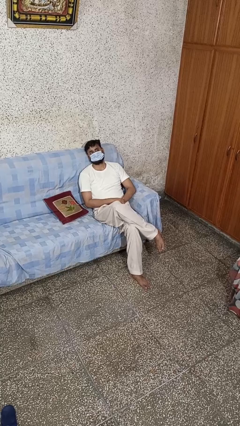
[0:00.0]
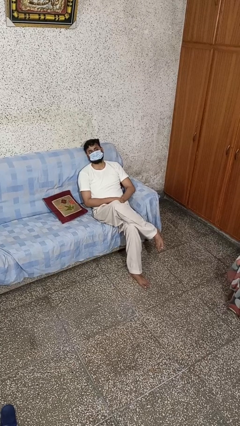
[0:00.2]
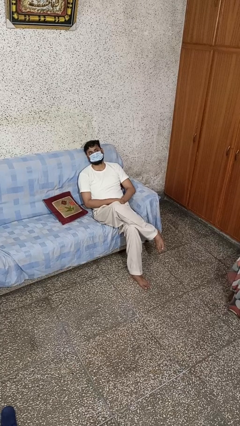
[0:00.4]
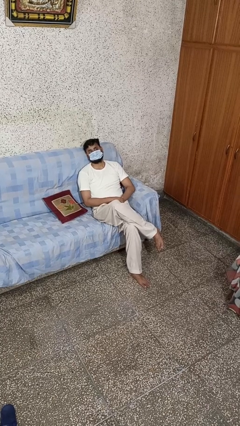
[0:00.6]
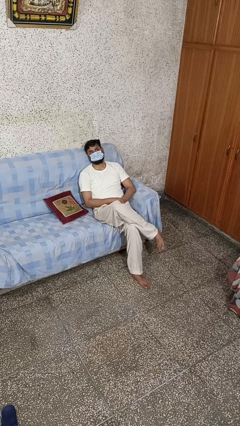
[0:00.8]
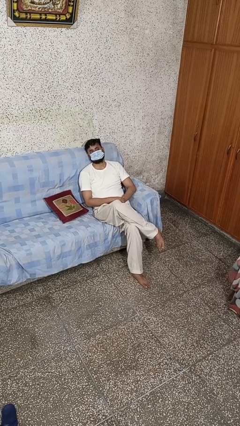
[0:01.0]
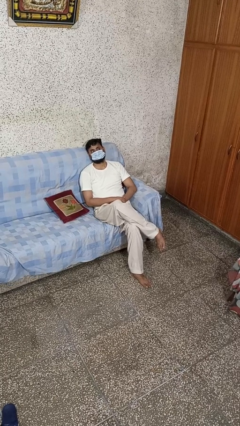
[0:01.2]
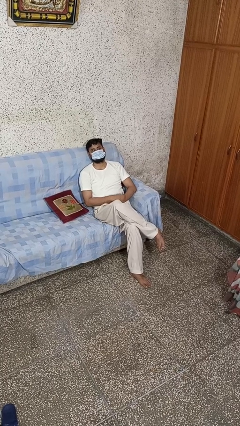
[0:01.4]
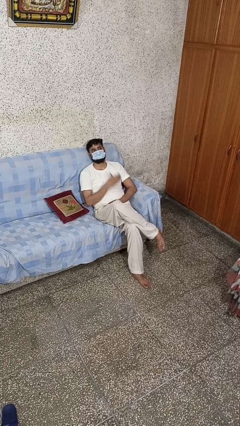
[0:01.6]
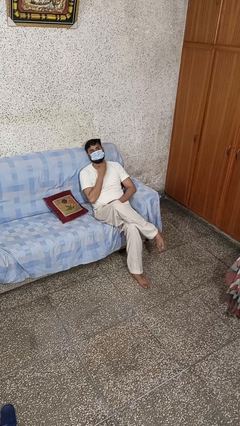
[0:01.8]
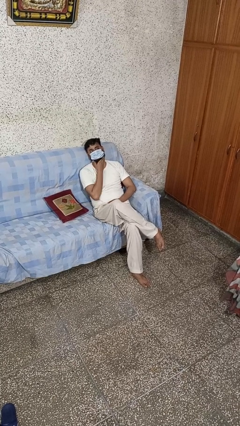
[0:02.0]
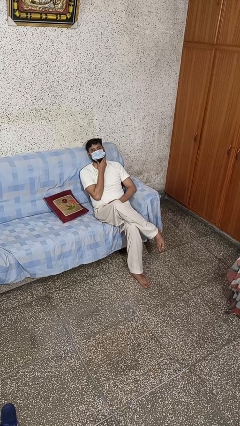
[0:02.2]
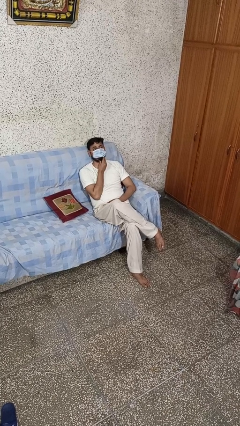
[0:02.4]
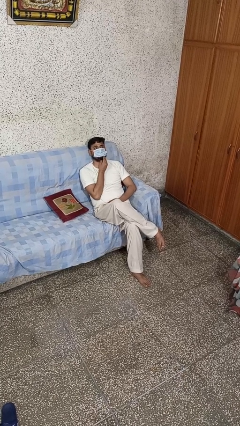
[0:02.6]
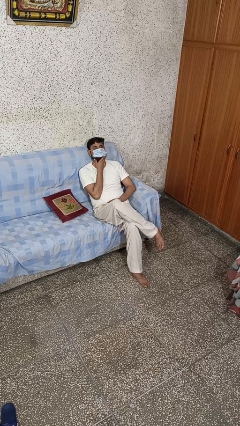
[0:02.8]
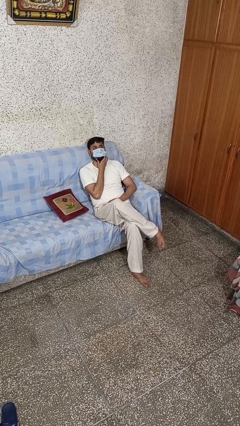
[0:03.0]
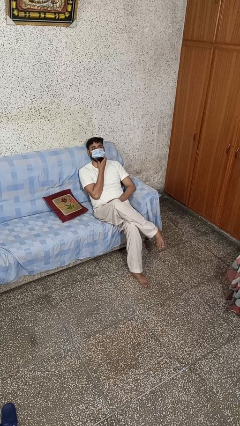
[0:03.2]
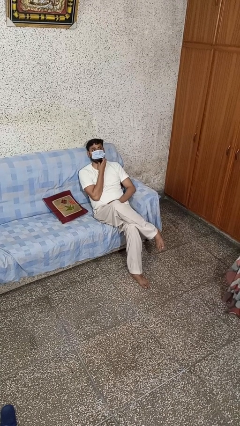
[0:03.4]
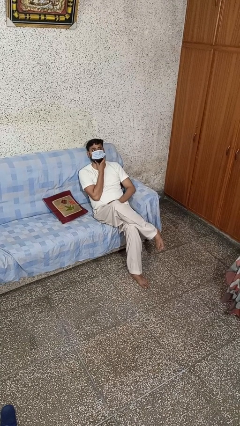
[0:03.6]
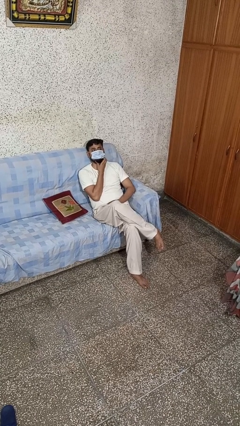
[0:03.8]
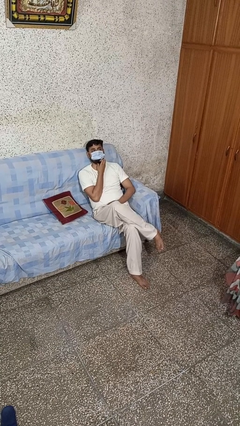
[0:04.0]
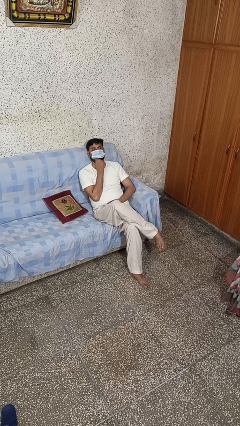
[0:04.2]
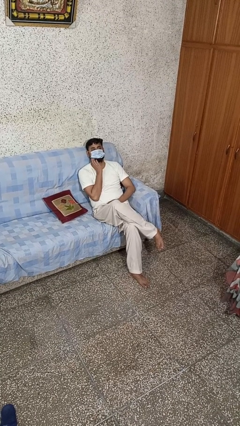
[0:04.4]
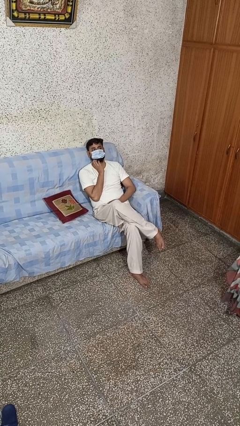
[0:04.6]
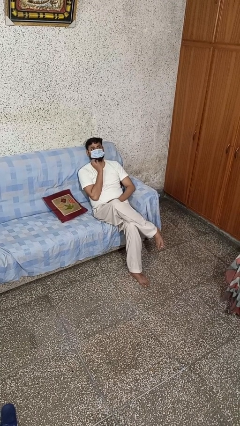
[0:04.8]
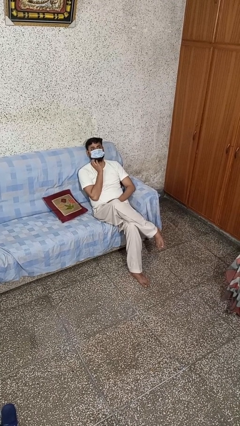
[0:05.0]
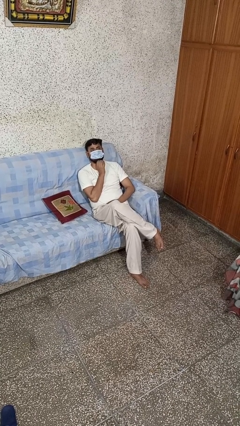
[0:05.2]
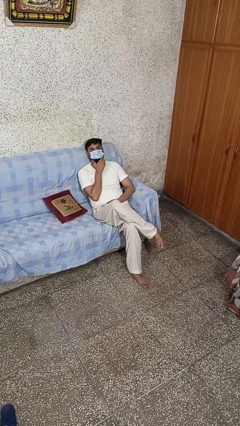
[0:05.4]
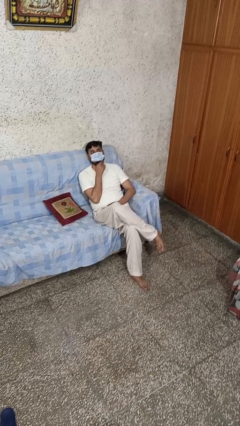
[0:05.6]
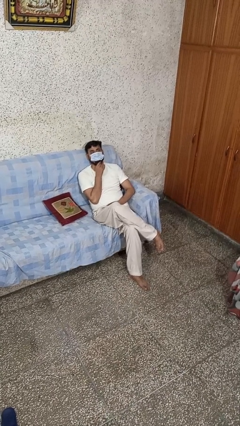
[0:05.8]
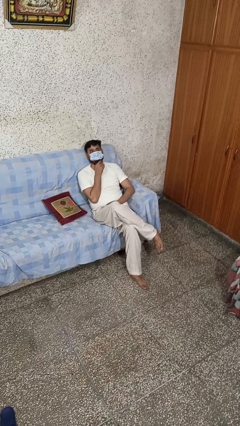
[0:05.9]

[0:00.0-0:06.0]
person strokes chin

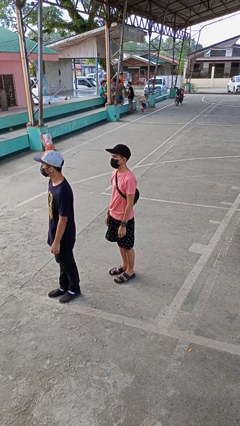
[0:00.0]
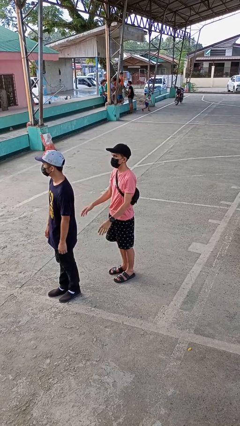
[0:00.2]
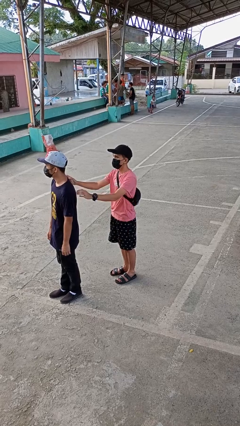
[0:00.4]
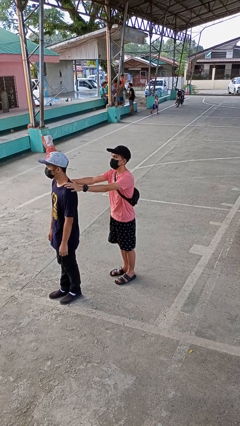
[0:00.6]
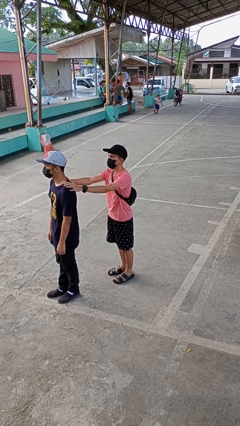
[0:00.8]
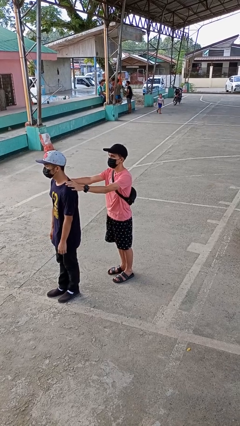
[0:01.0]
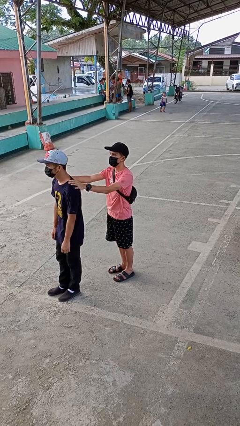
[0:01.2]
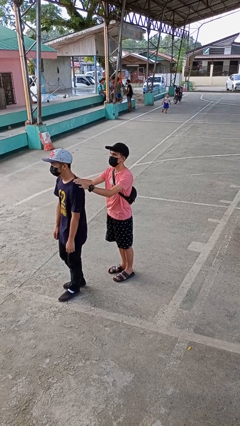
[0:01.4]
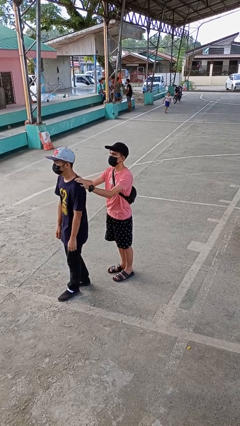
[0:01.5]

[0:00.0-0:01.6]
person grabs person by shoulder

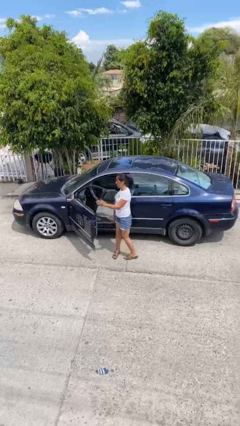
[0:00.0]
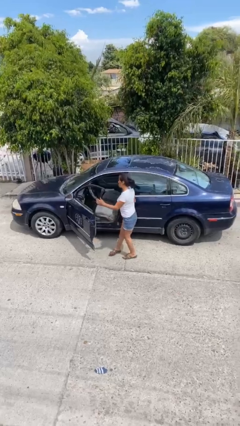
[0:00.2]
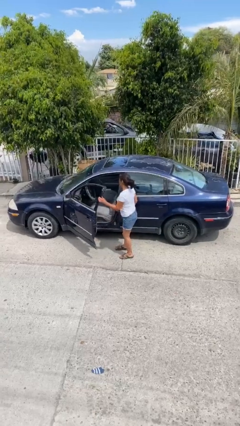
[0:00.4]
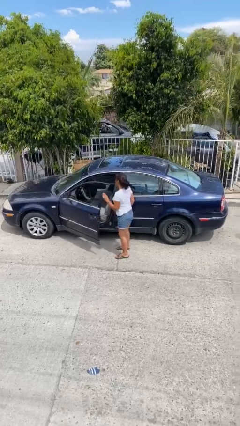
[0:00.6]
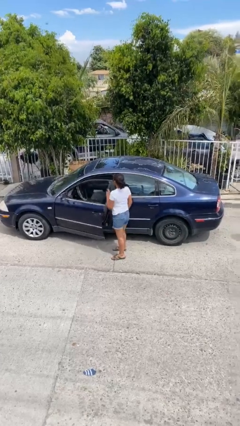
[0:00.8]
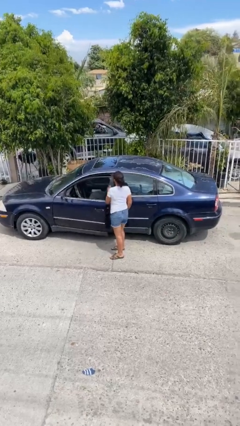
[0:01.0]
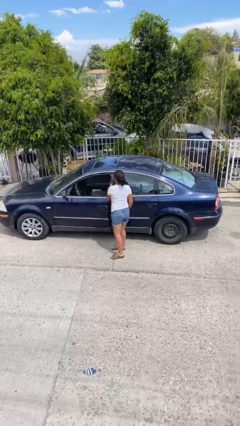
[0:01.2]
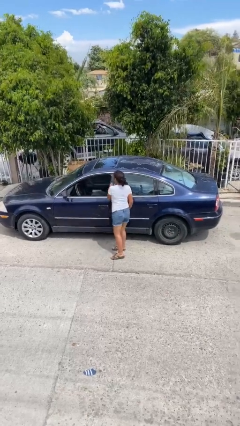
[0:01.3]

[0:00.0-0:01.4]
person closes car door

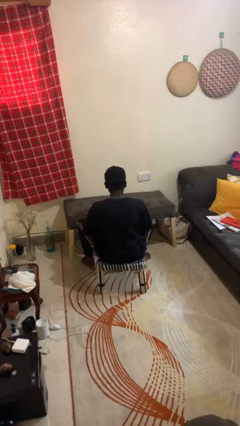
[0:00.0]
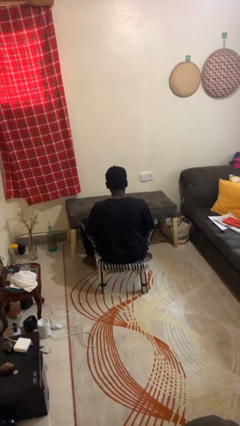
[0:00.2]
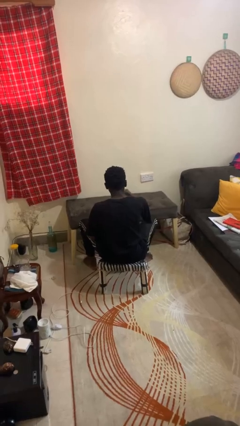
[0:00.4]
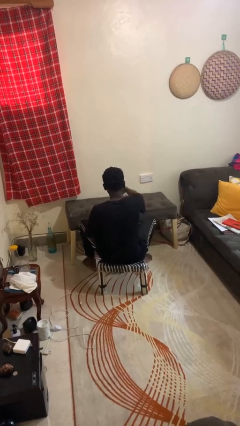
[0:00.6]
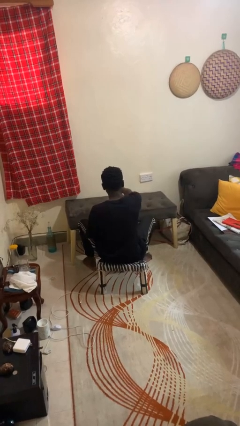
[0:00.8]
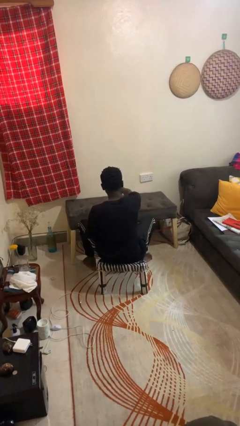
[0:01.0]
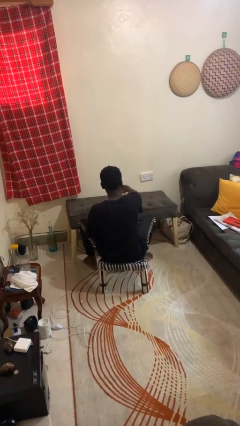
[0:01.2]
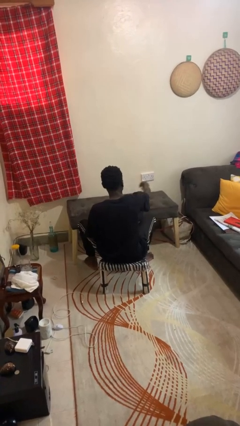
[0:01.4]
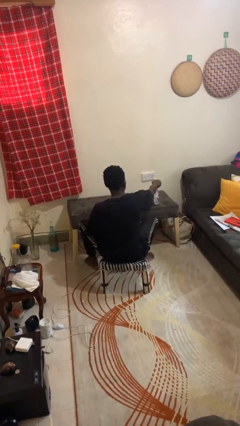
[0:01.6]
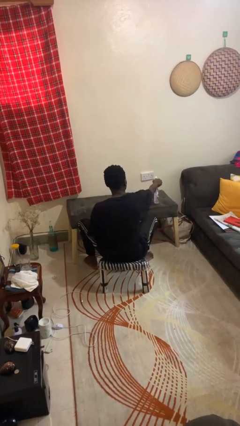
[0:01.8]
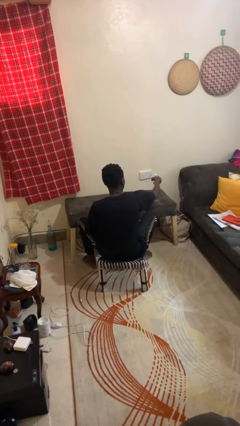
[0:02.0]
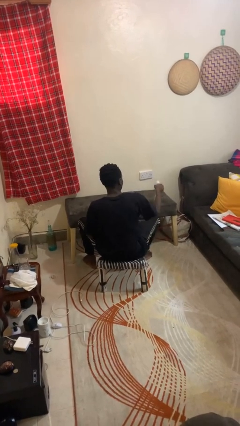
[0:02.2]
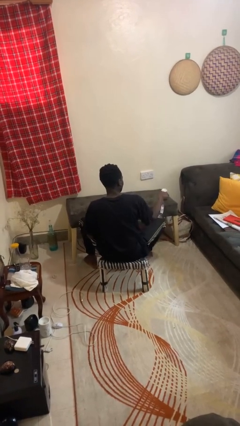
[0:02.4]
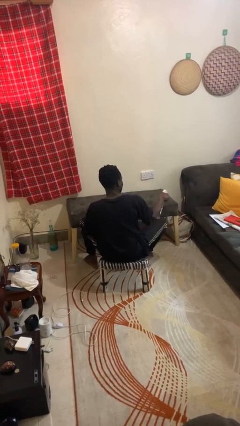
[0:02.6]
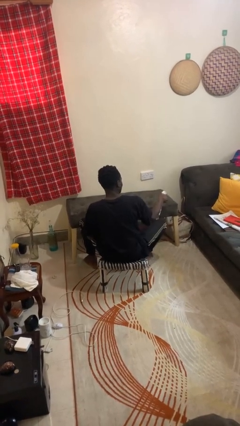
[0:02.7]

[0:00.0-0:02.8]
person sprays from bottle

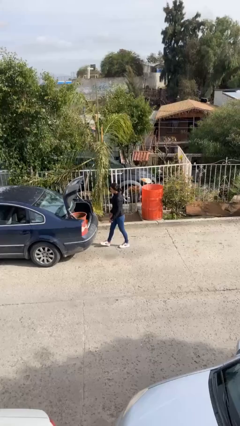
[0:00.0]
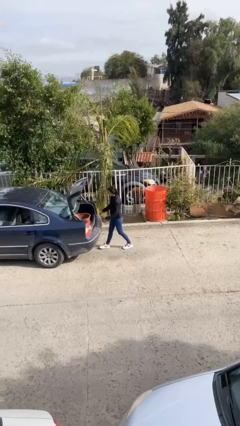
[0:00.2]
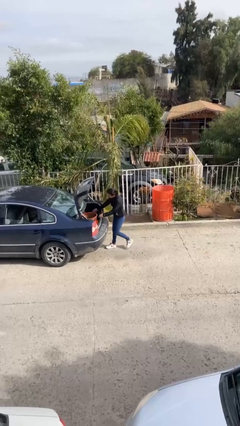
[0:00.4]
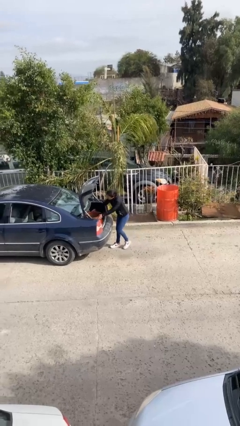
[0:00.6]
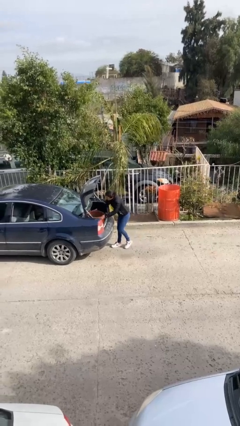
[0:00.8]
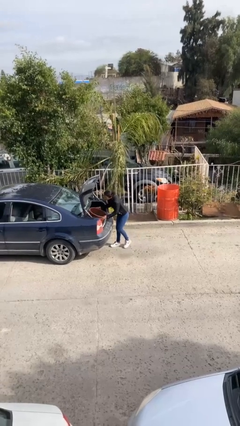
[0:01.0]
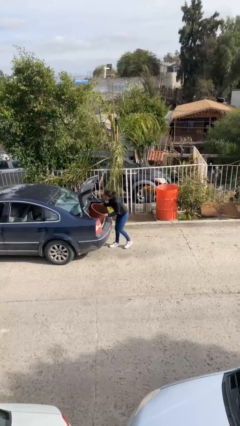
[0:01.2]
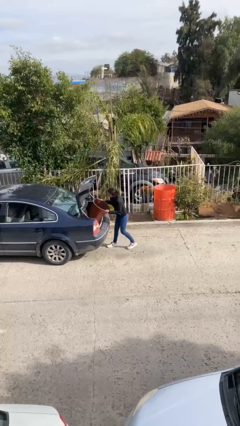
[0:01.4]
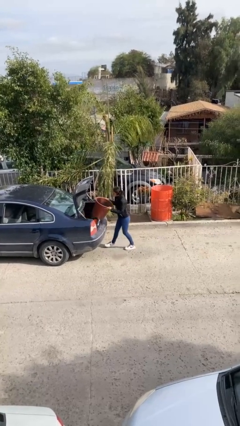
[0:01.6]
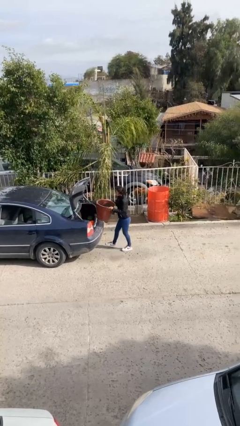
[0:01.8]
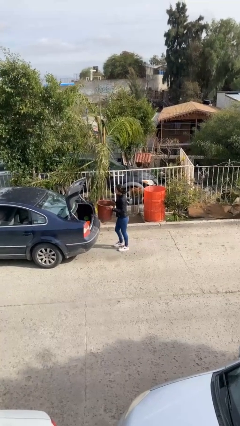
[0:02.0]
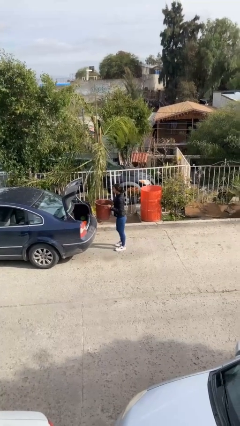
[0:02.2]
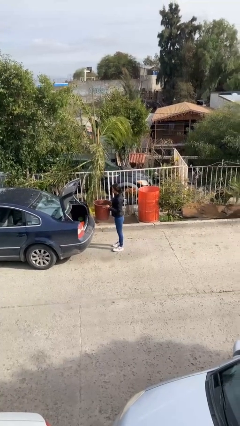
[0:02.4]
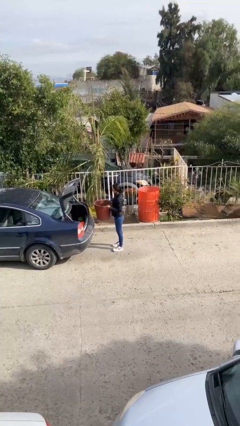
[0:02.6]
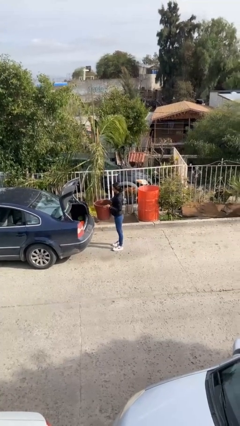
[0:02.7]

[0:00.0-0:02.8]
person unloads car

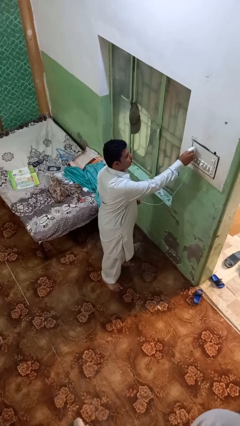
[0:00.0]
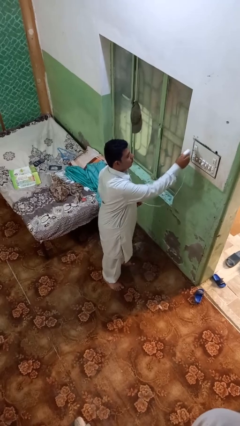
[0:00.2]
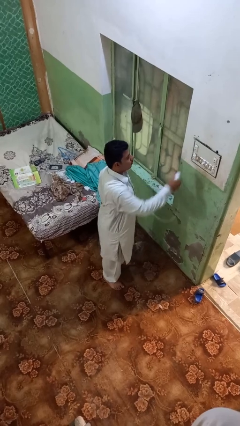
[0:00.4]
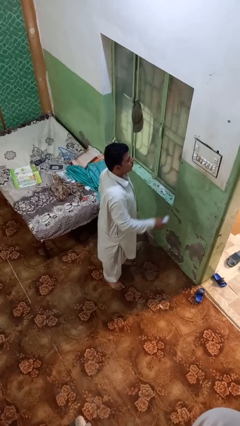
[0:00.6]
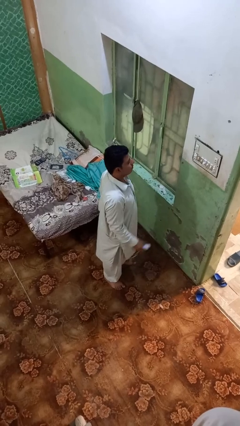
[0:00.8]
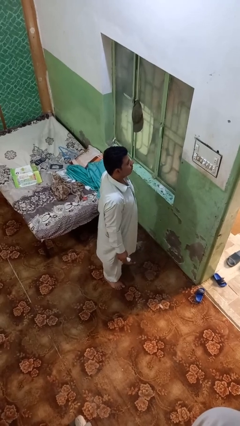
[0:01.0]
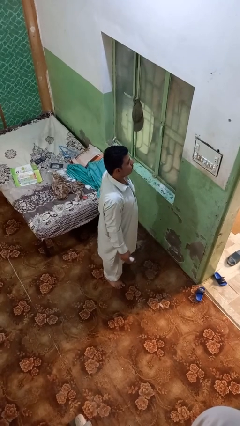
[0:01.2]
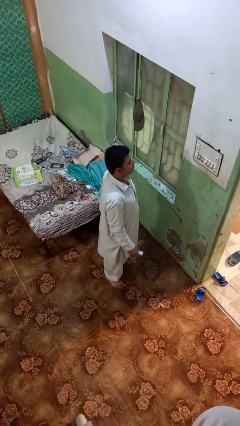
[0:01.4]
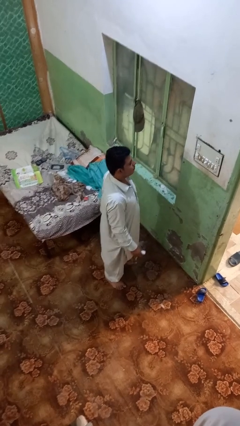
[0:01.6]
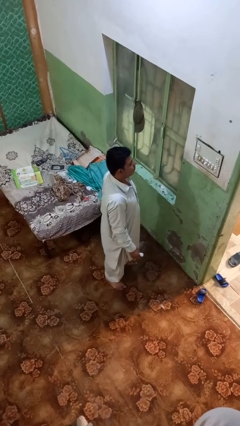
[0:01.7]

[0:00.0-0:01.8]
person unplugs from electrical socket

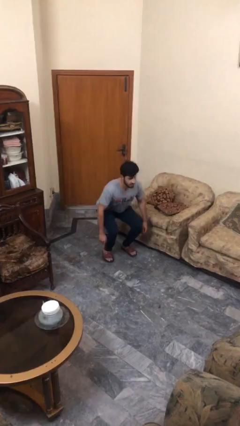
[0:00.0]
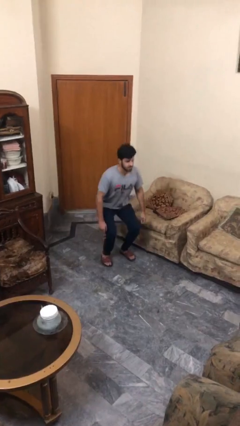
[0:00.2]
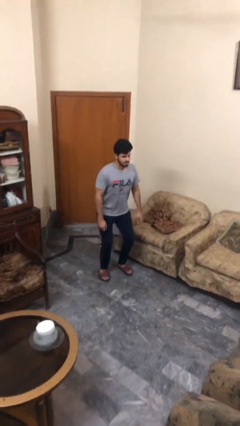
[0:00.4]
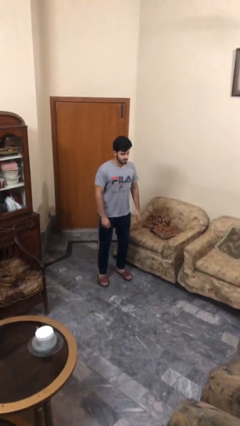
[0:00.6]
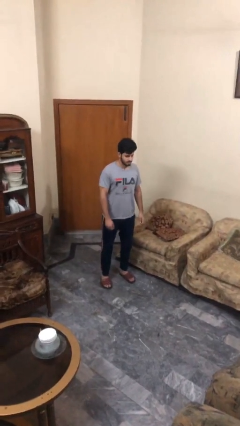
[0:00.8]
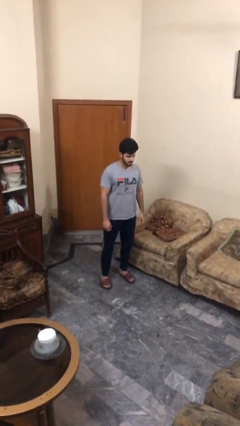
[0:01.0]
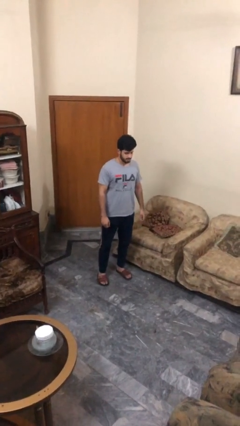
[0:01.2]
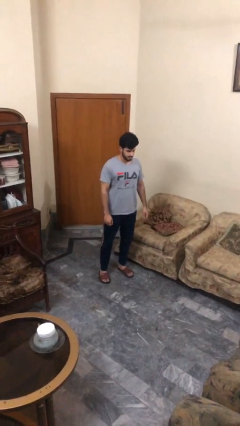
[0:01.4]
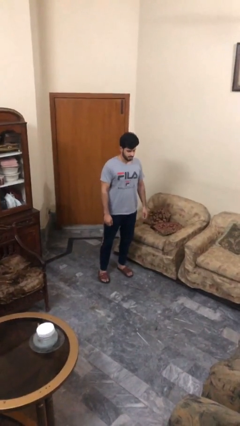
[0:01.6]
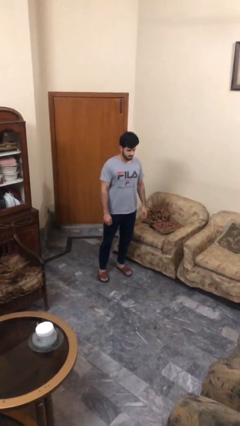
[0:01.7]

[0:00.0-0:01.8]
person stands up
